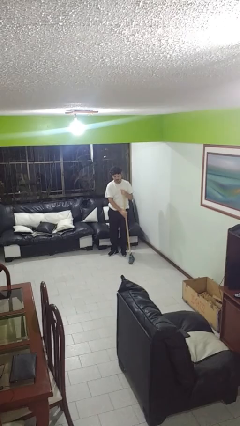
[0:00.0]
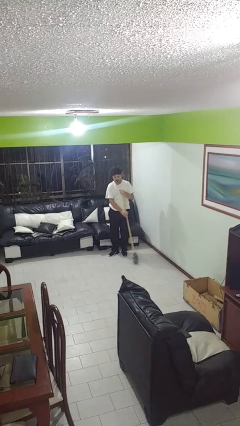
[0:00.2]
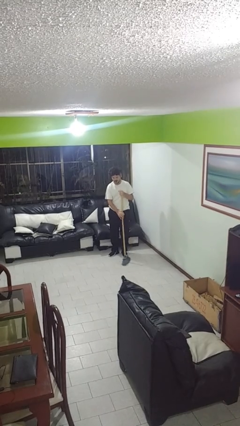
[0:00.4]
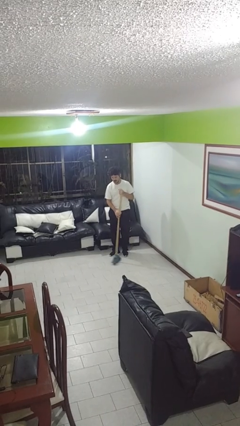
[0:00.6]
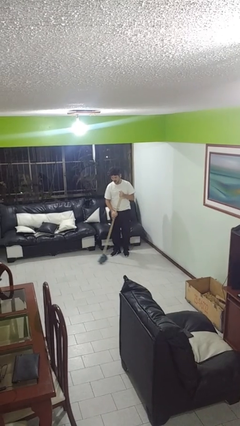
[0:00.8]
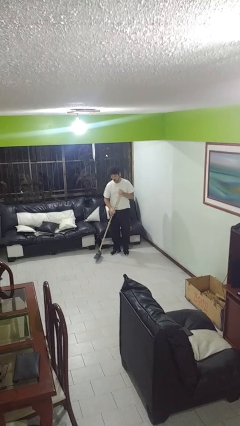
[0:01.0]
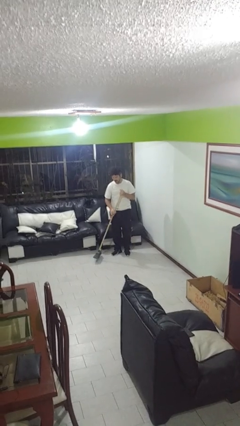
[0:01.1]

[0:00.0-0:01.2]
person sweeps floor

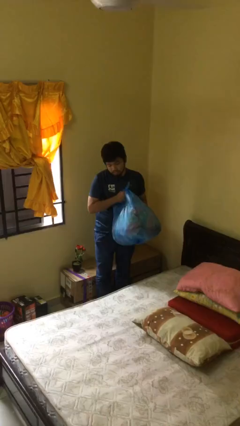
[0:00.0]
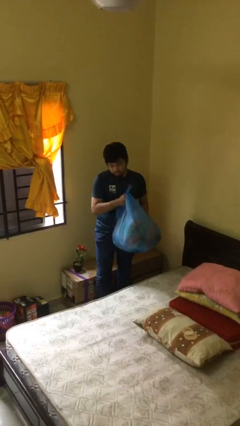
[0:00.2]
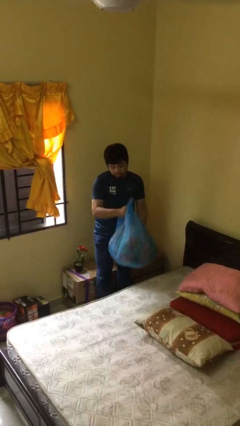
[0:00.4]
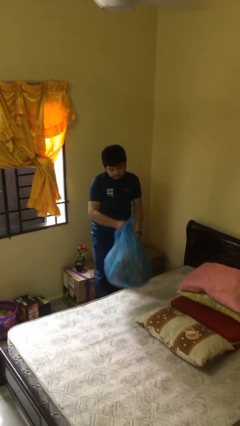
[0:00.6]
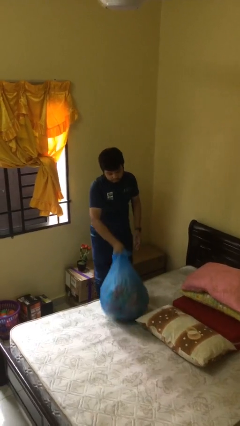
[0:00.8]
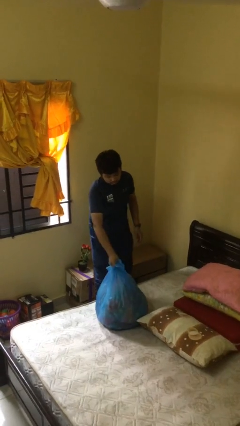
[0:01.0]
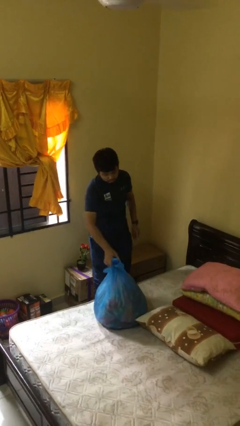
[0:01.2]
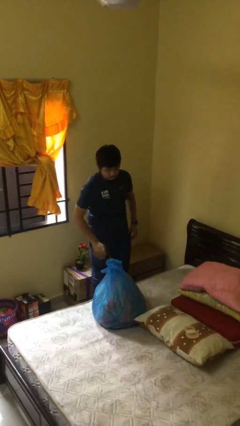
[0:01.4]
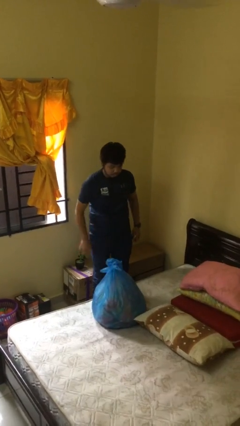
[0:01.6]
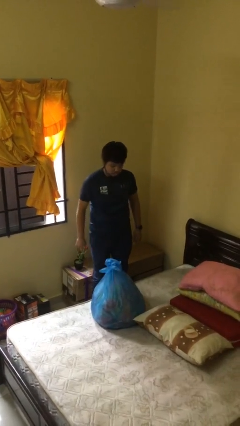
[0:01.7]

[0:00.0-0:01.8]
person puts down object on bed

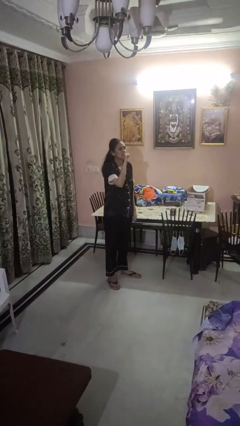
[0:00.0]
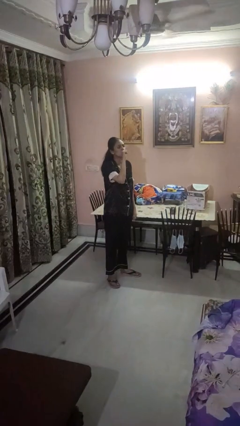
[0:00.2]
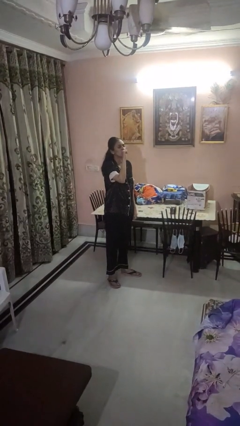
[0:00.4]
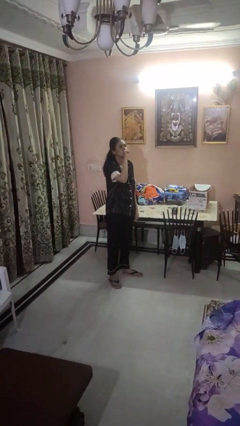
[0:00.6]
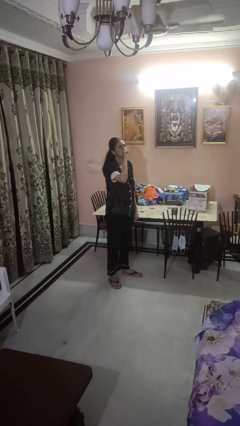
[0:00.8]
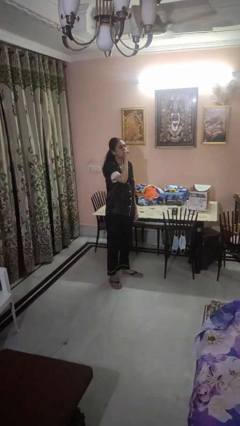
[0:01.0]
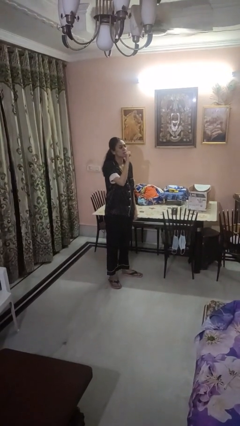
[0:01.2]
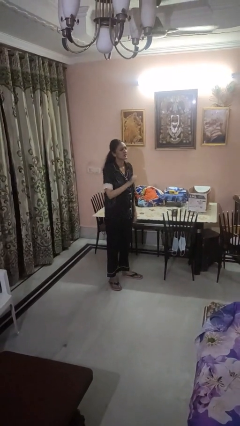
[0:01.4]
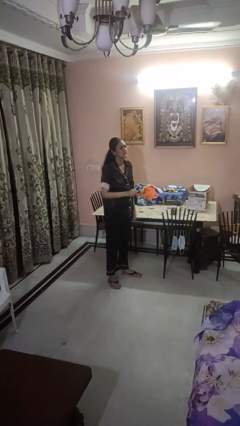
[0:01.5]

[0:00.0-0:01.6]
person vapes

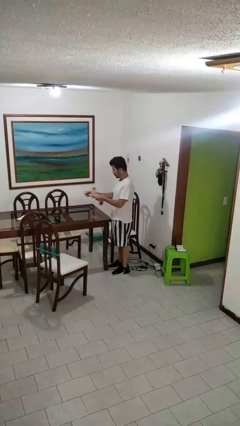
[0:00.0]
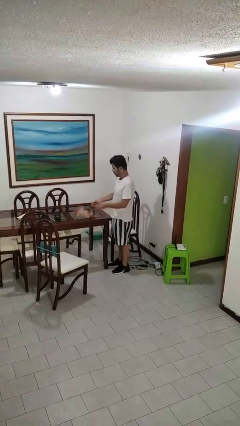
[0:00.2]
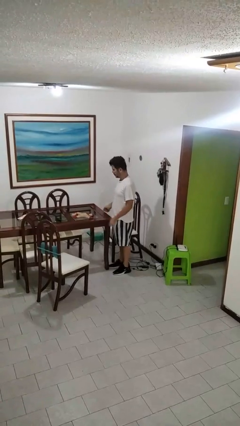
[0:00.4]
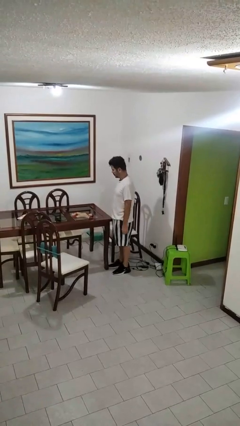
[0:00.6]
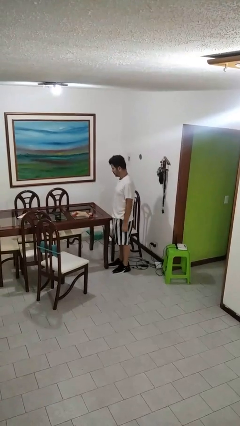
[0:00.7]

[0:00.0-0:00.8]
person throws object on table

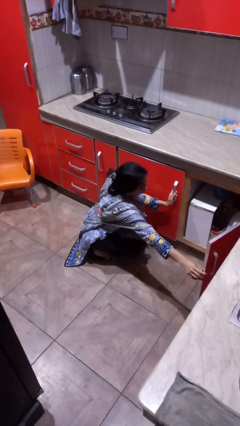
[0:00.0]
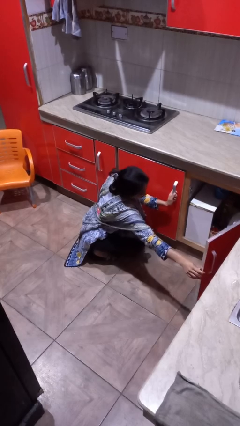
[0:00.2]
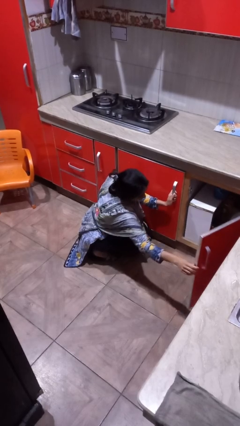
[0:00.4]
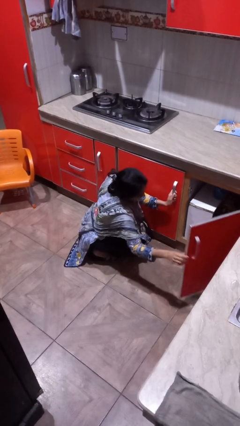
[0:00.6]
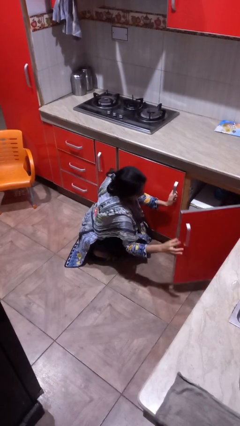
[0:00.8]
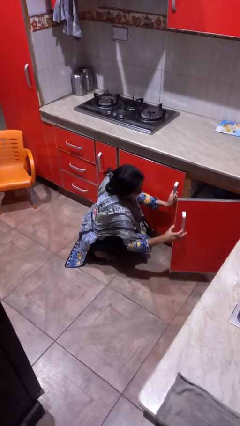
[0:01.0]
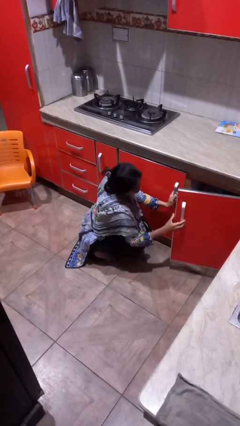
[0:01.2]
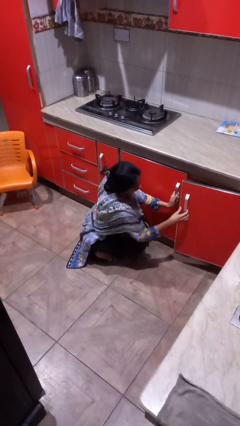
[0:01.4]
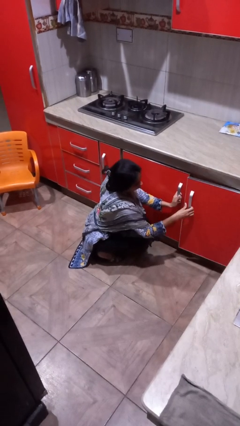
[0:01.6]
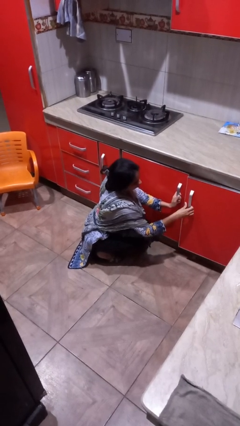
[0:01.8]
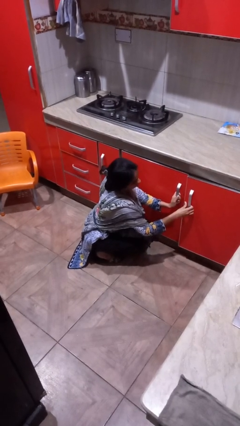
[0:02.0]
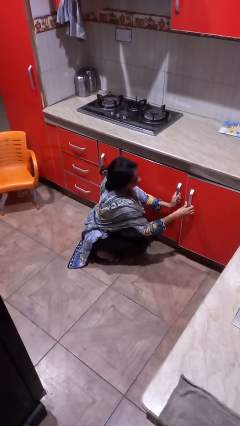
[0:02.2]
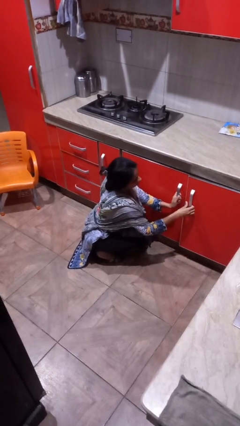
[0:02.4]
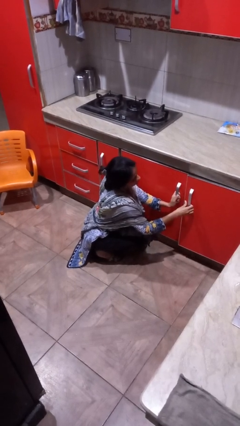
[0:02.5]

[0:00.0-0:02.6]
person closes cabinet

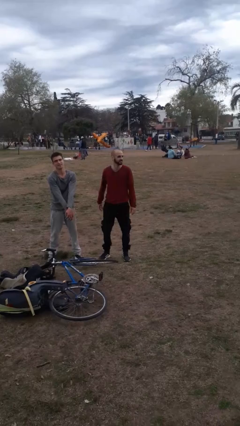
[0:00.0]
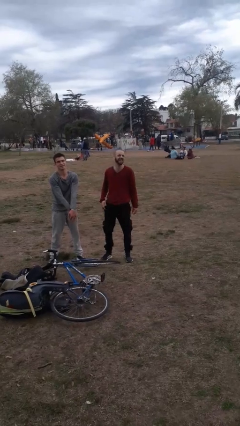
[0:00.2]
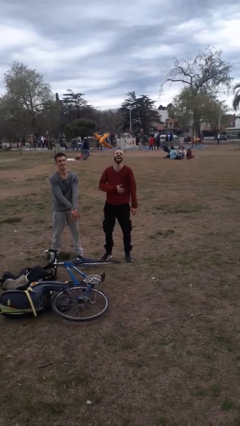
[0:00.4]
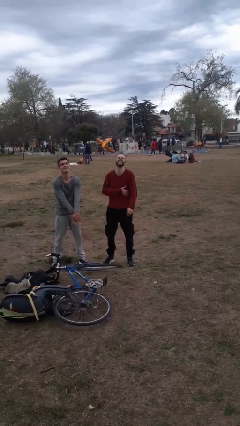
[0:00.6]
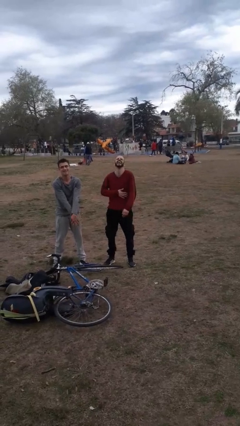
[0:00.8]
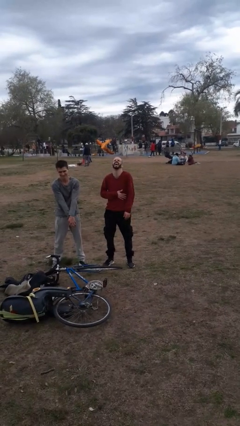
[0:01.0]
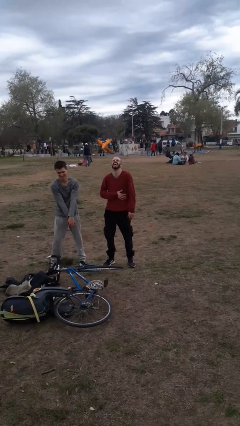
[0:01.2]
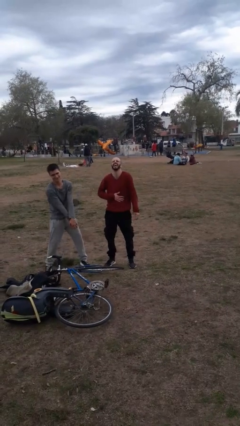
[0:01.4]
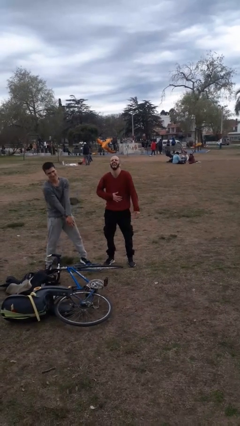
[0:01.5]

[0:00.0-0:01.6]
person laughs with person

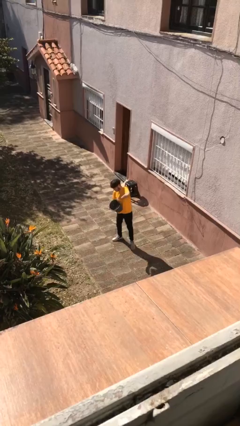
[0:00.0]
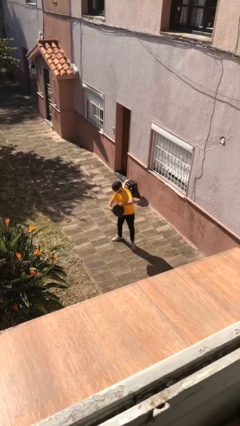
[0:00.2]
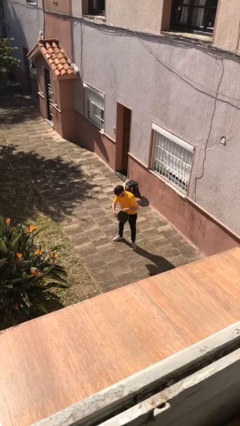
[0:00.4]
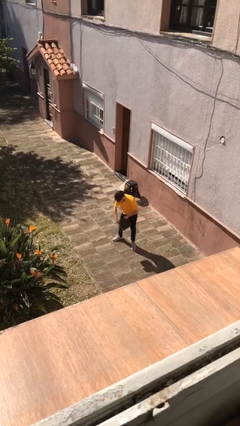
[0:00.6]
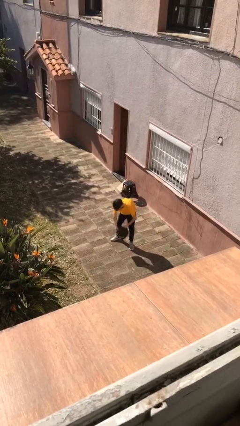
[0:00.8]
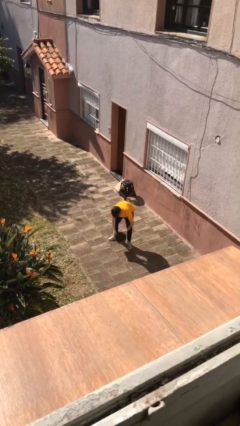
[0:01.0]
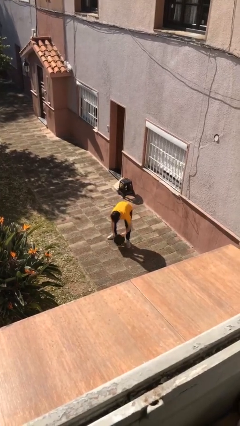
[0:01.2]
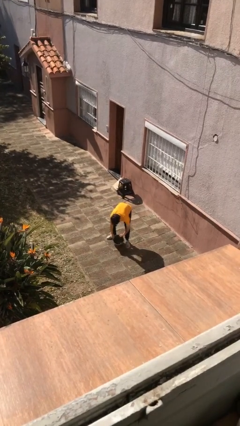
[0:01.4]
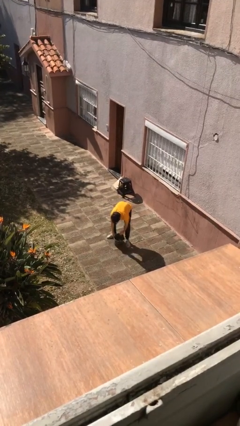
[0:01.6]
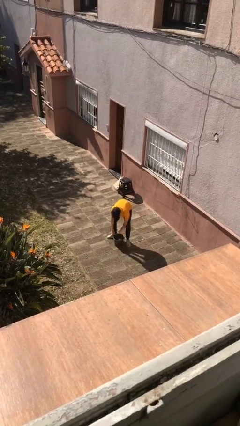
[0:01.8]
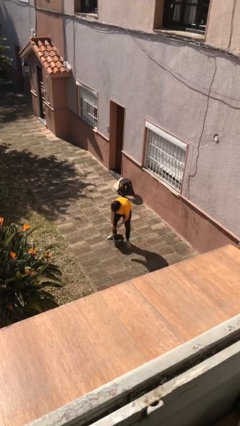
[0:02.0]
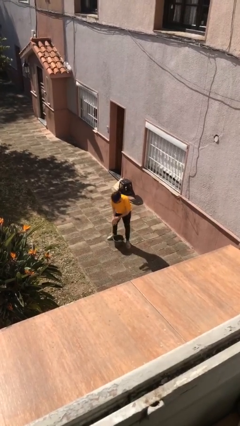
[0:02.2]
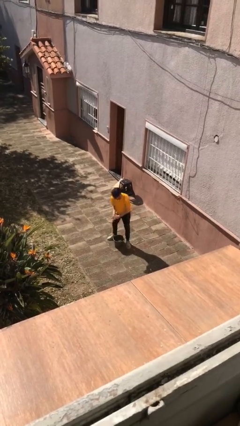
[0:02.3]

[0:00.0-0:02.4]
person puts down object on floor

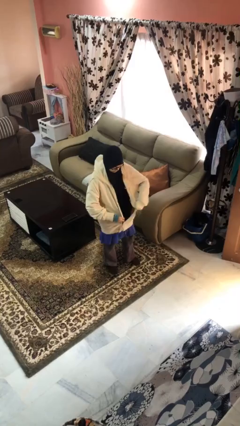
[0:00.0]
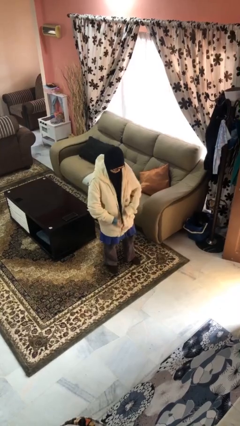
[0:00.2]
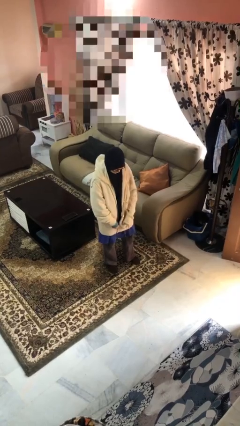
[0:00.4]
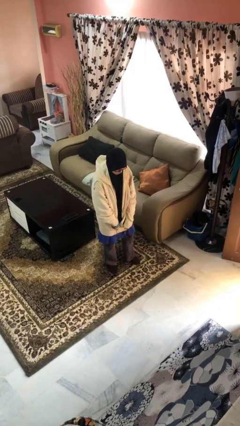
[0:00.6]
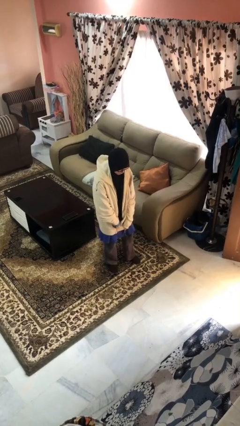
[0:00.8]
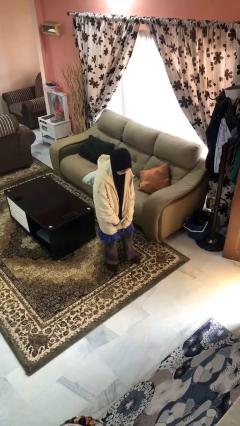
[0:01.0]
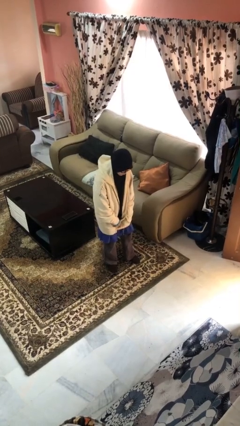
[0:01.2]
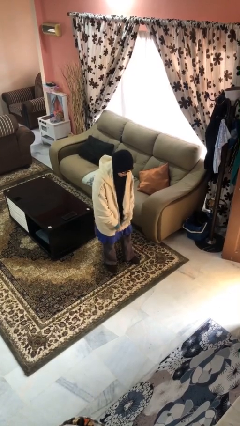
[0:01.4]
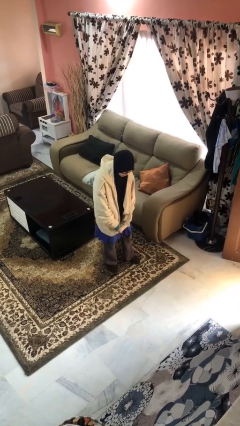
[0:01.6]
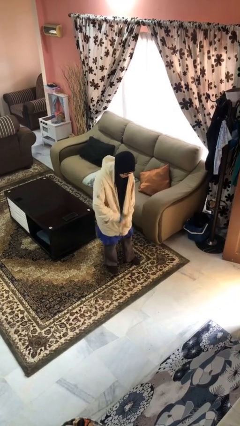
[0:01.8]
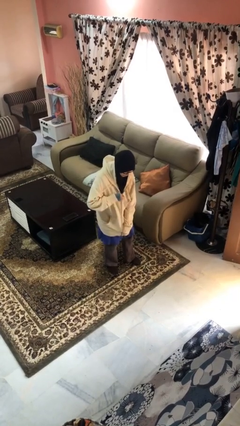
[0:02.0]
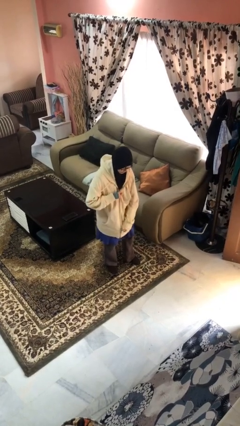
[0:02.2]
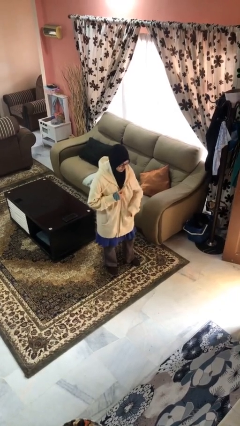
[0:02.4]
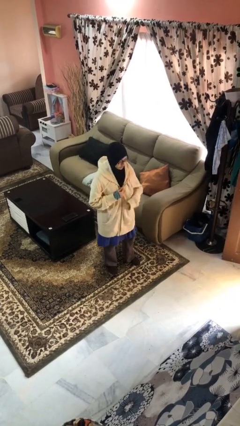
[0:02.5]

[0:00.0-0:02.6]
person zips up jacket

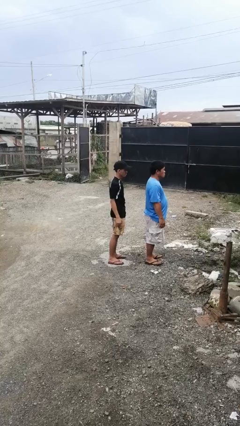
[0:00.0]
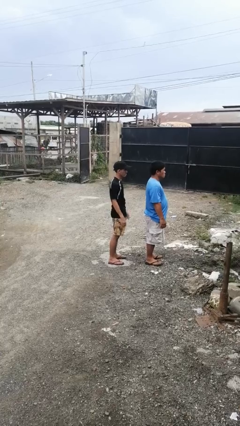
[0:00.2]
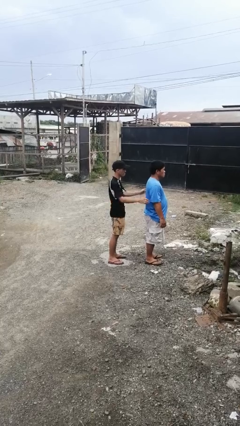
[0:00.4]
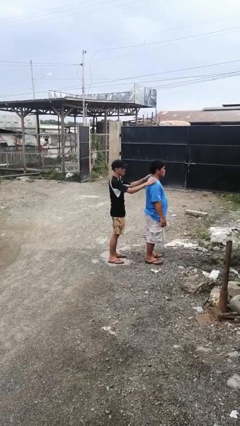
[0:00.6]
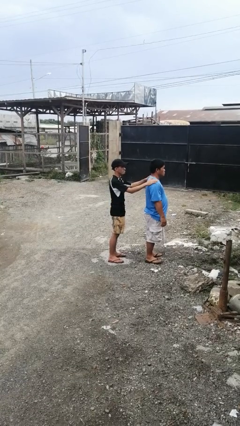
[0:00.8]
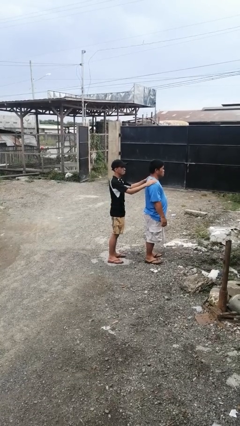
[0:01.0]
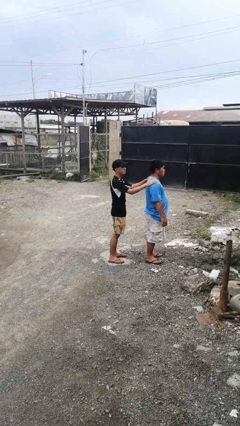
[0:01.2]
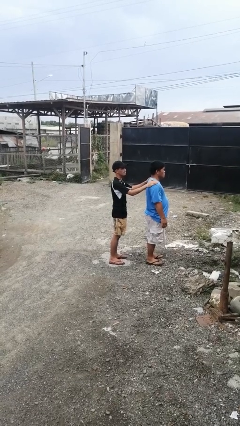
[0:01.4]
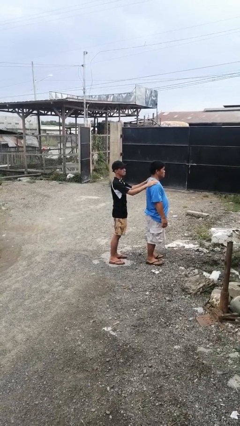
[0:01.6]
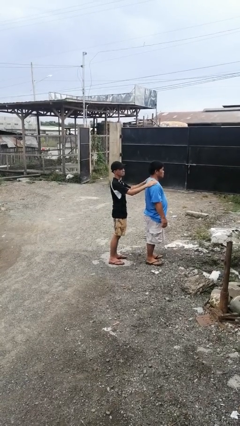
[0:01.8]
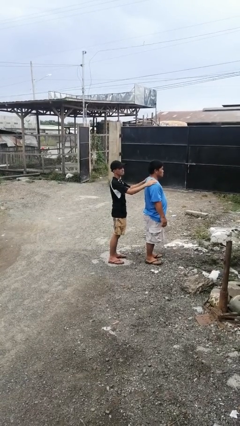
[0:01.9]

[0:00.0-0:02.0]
person grabs person by shoulder
